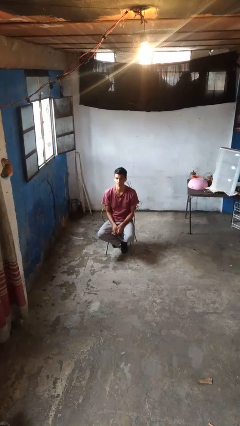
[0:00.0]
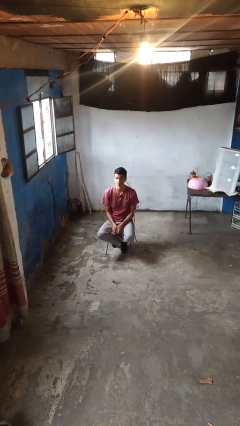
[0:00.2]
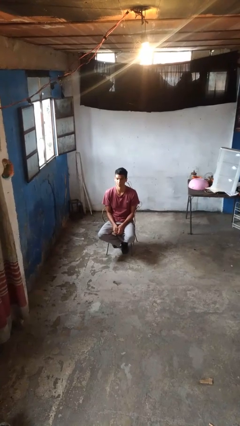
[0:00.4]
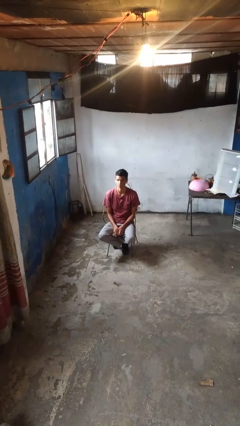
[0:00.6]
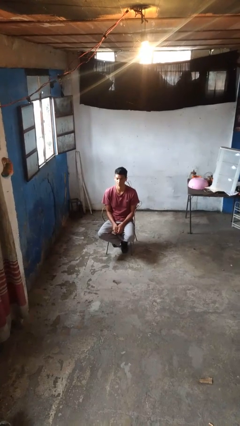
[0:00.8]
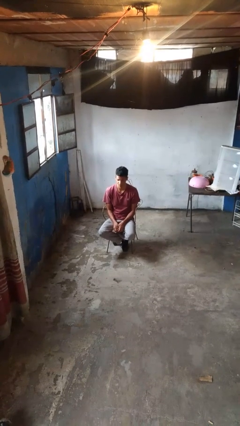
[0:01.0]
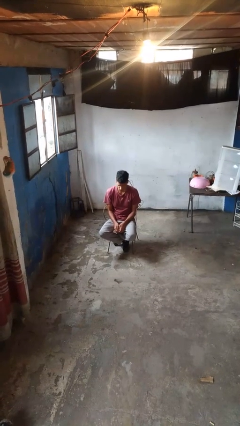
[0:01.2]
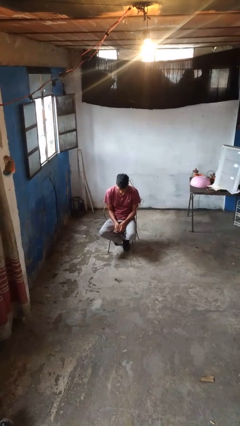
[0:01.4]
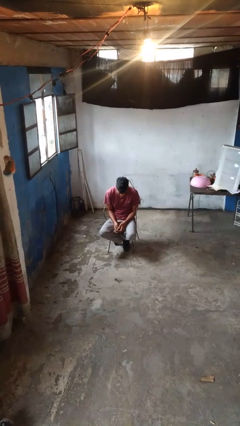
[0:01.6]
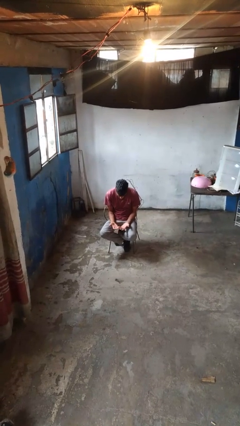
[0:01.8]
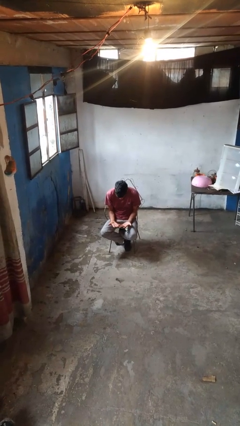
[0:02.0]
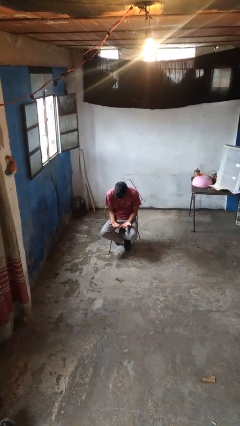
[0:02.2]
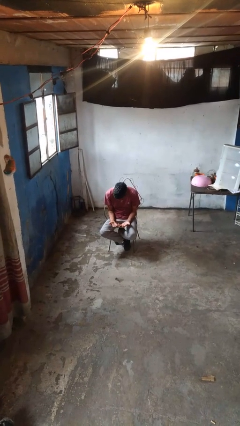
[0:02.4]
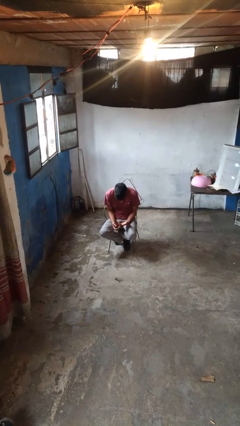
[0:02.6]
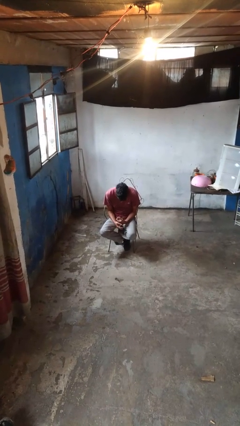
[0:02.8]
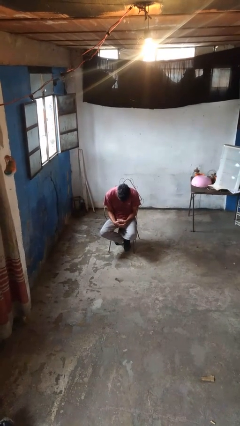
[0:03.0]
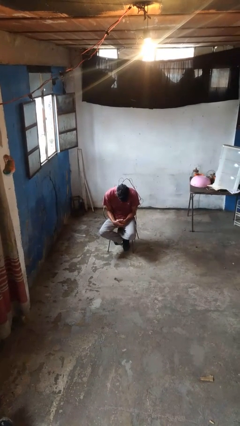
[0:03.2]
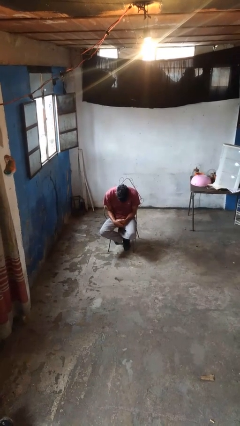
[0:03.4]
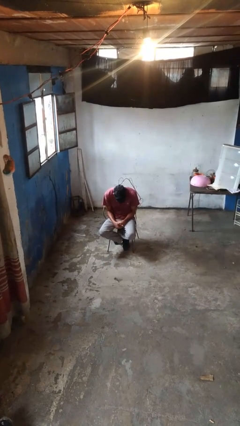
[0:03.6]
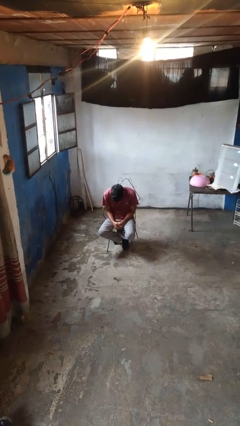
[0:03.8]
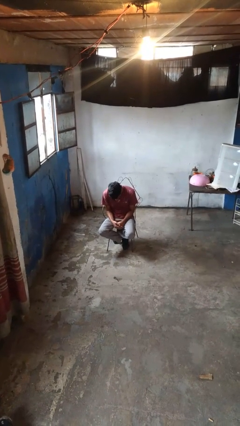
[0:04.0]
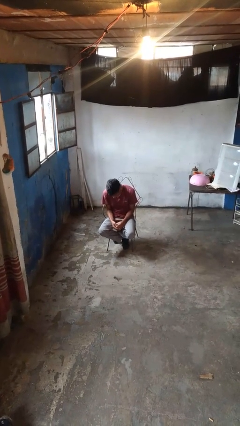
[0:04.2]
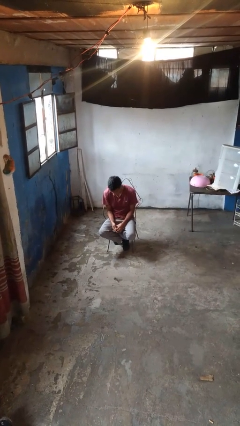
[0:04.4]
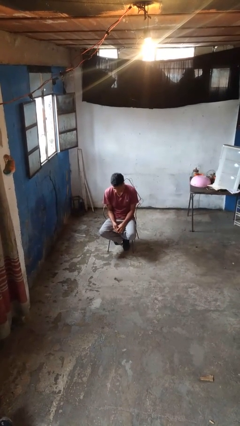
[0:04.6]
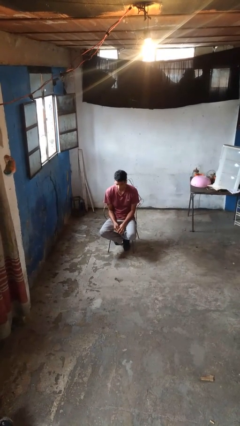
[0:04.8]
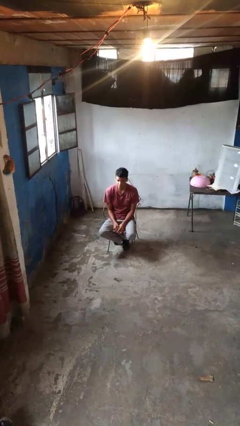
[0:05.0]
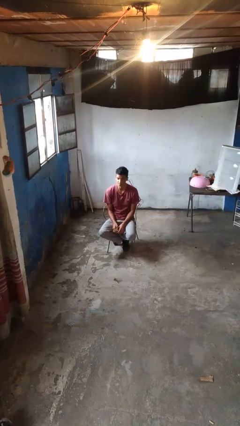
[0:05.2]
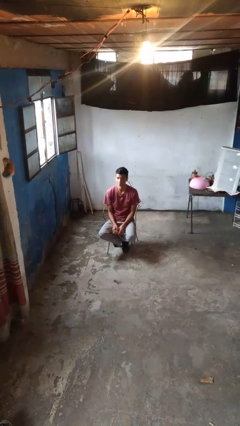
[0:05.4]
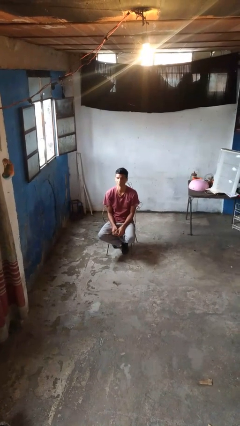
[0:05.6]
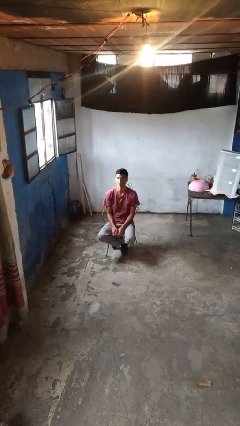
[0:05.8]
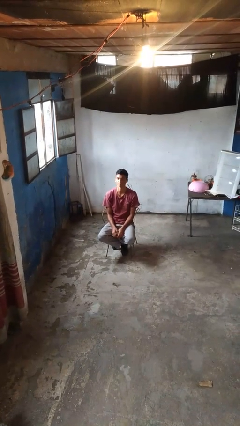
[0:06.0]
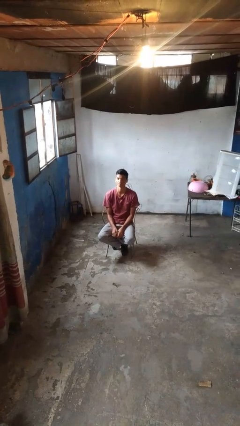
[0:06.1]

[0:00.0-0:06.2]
person looks at hands in lap

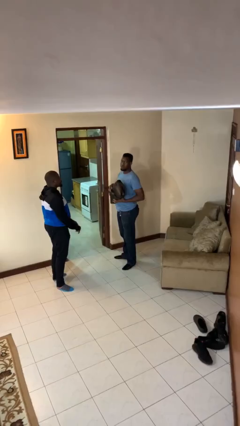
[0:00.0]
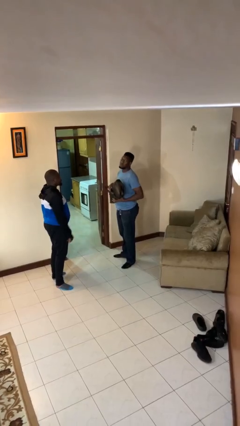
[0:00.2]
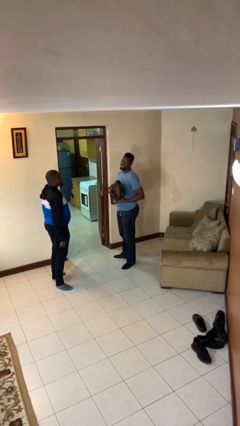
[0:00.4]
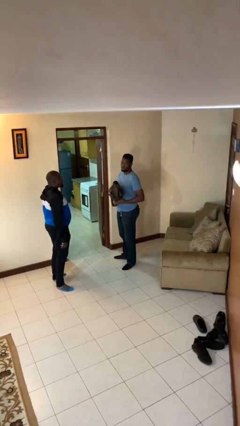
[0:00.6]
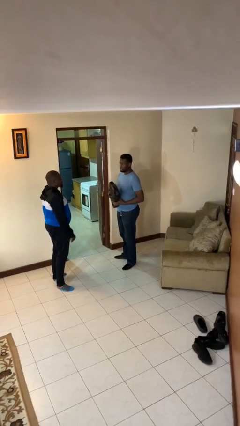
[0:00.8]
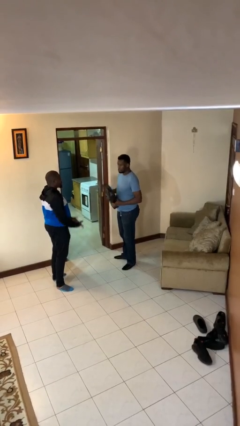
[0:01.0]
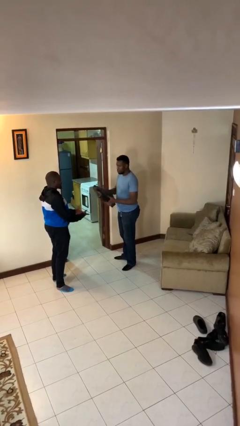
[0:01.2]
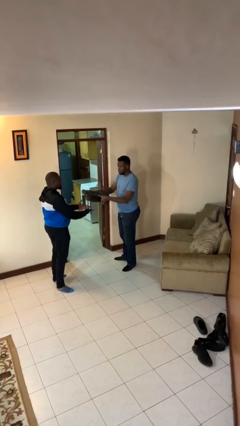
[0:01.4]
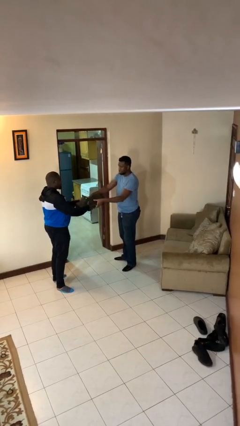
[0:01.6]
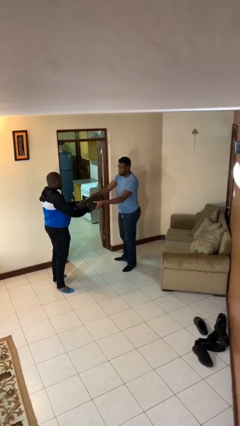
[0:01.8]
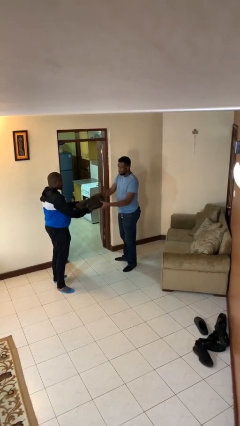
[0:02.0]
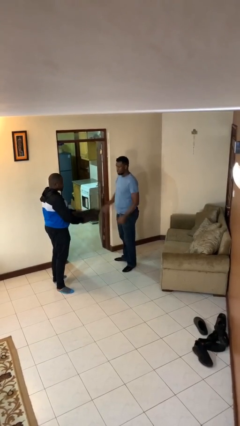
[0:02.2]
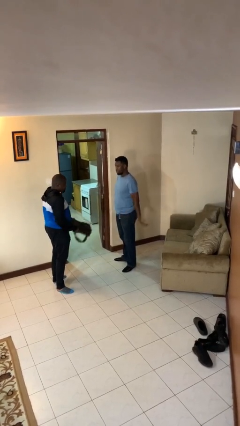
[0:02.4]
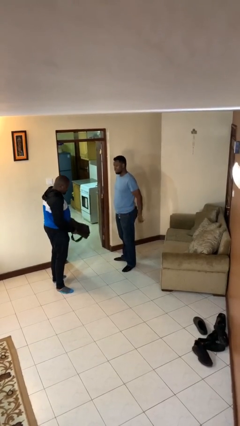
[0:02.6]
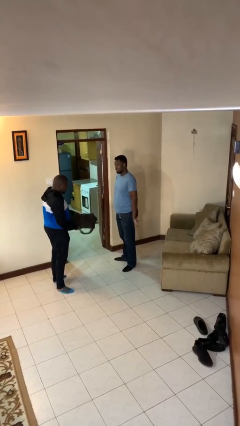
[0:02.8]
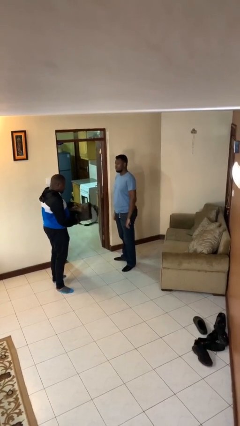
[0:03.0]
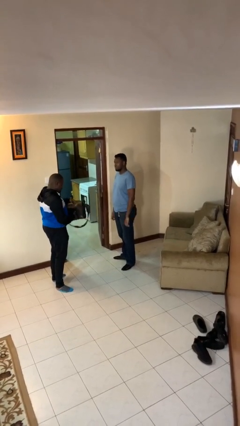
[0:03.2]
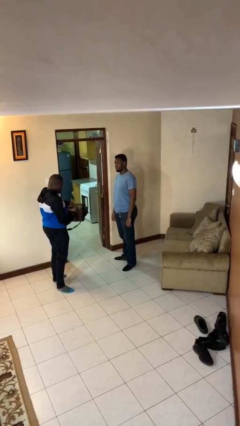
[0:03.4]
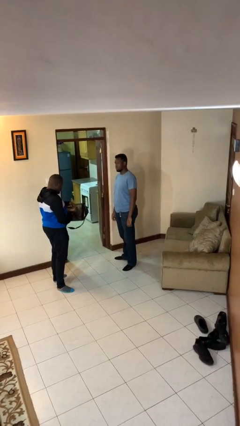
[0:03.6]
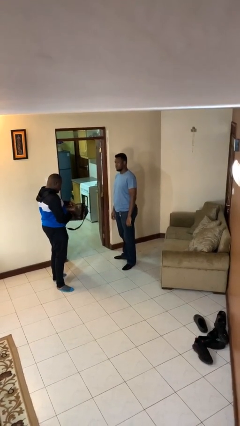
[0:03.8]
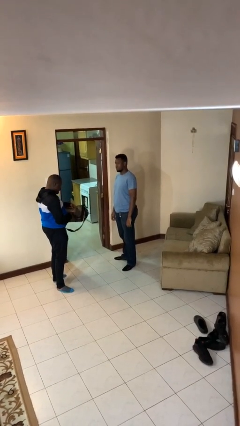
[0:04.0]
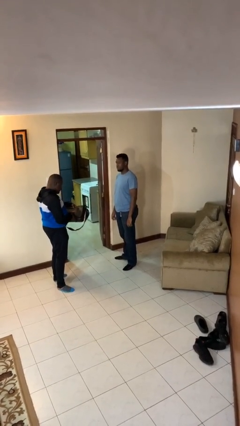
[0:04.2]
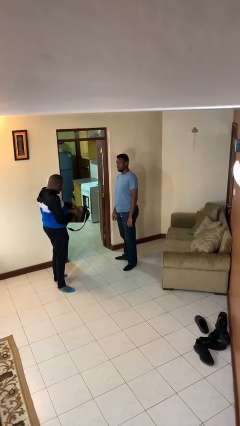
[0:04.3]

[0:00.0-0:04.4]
person transfers object to person

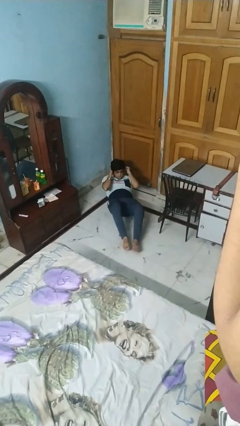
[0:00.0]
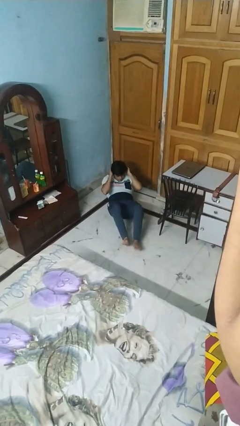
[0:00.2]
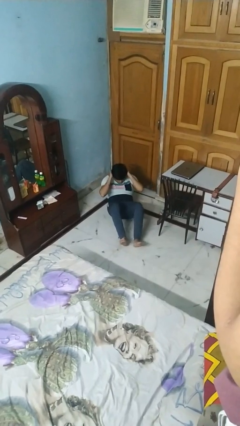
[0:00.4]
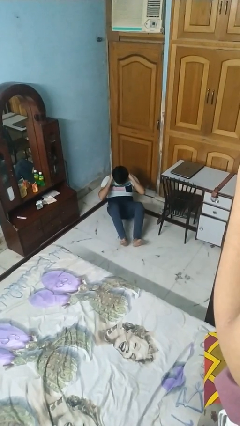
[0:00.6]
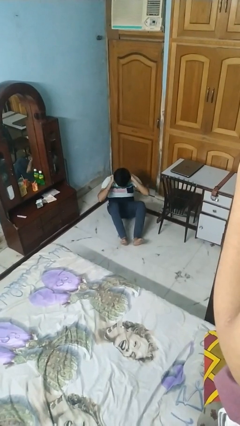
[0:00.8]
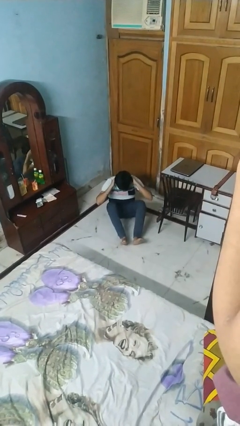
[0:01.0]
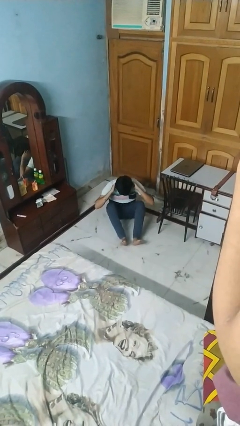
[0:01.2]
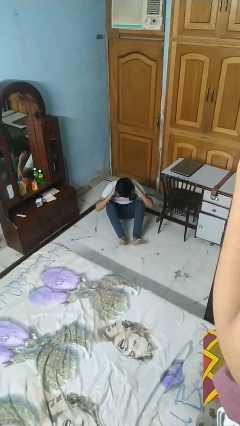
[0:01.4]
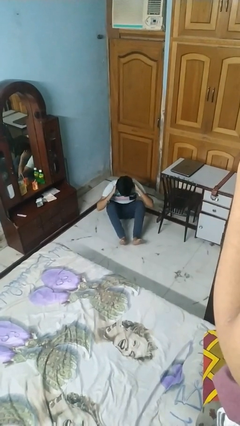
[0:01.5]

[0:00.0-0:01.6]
person exercises with situp

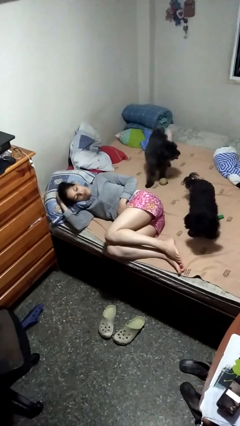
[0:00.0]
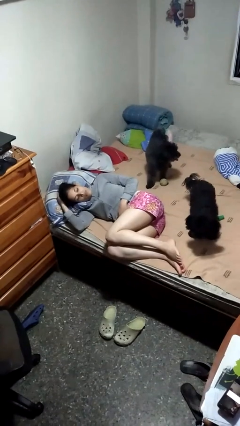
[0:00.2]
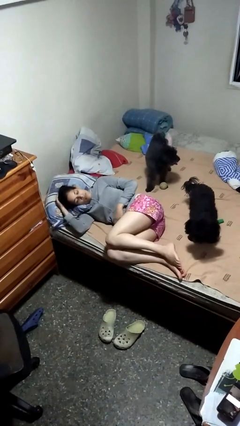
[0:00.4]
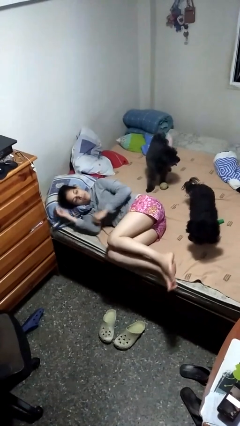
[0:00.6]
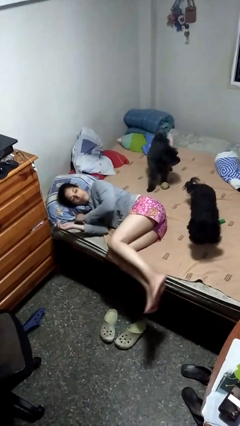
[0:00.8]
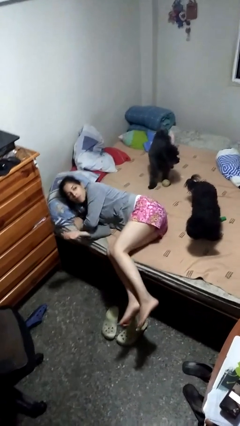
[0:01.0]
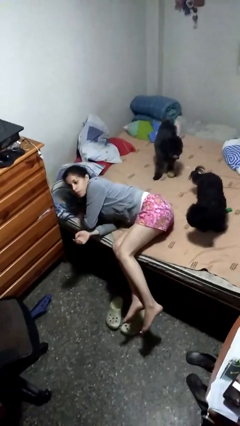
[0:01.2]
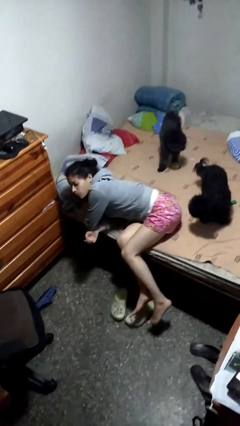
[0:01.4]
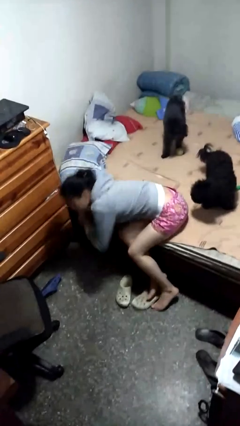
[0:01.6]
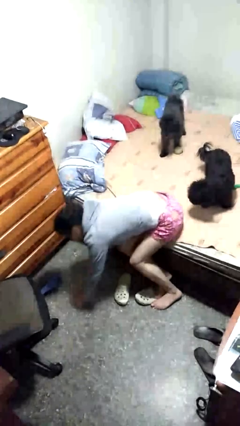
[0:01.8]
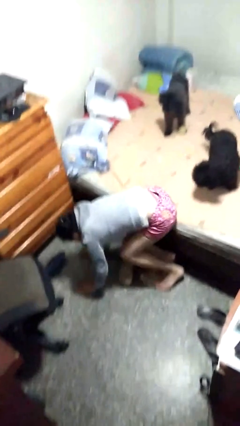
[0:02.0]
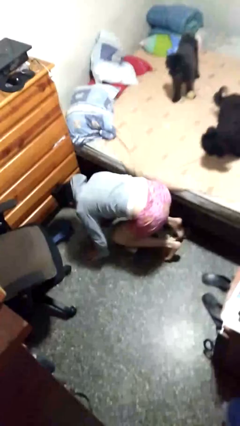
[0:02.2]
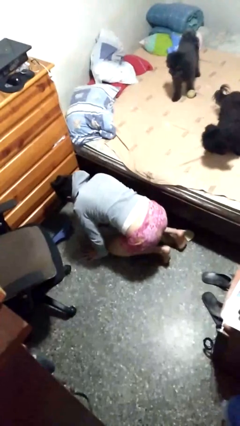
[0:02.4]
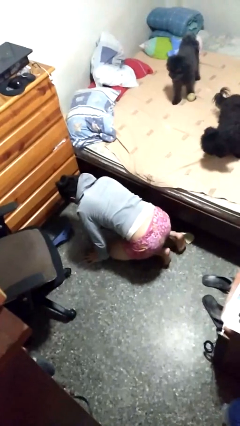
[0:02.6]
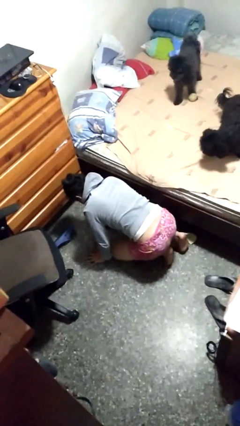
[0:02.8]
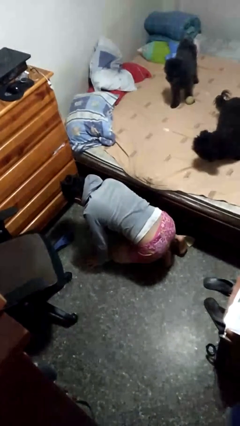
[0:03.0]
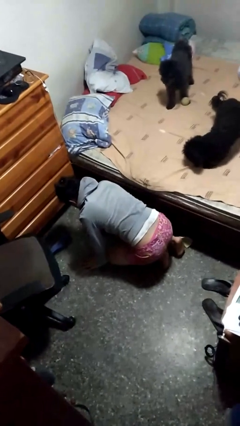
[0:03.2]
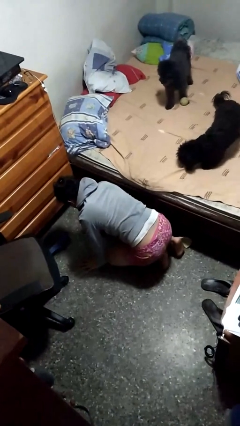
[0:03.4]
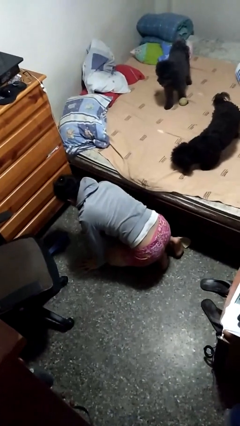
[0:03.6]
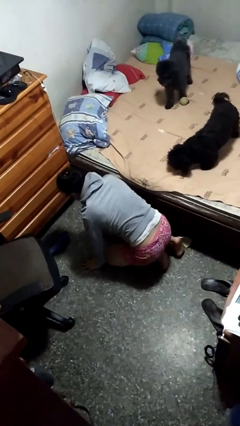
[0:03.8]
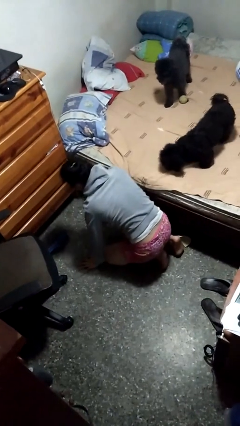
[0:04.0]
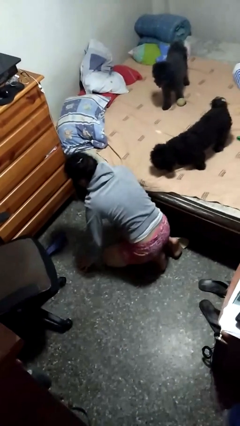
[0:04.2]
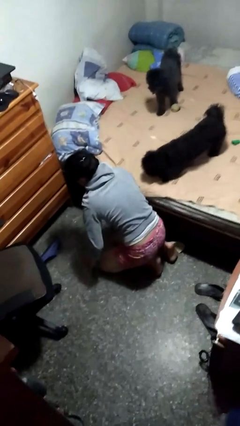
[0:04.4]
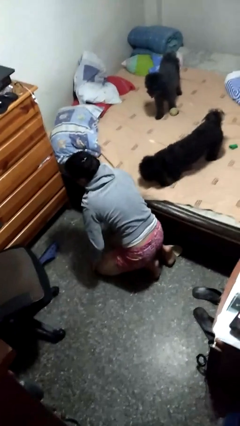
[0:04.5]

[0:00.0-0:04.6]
person falls from bed

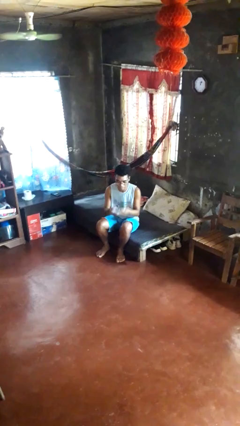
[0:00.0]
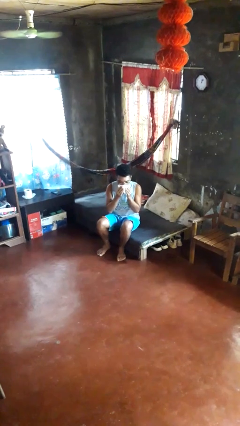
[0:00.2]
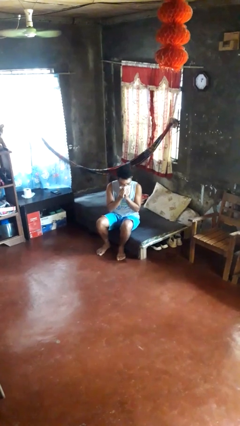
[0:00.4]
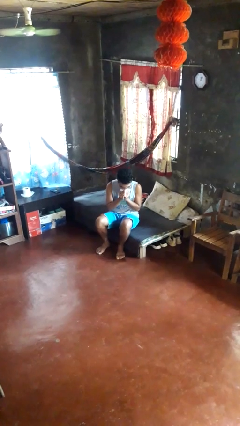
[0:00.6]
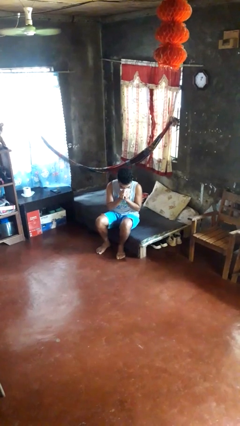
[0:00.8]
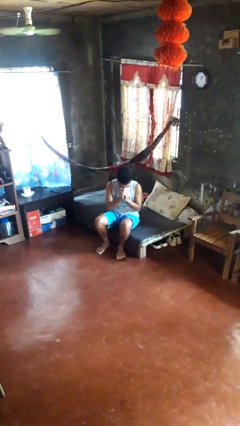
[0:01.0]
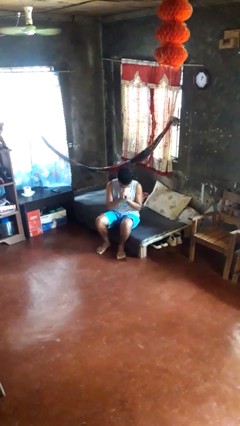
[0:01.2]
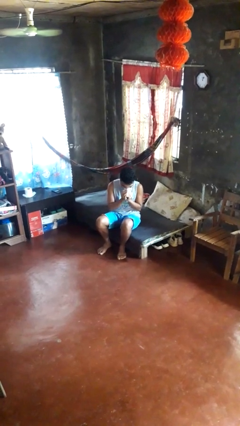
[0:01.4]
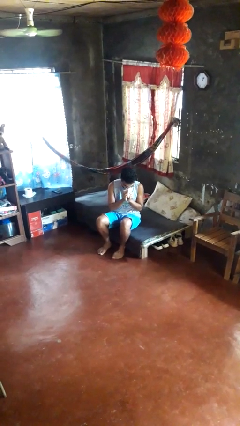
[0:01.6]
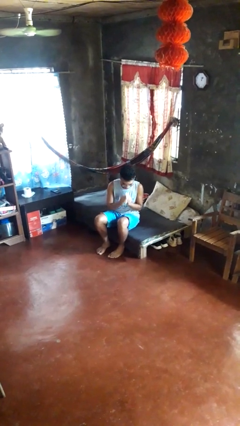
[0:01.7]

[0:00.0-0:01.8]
person blows nose
